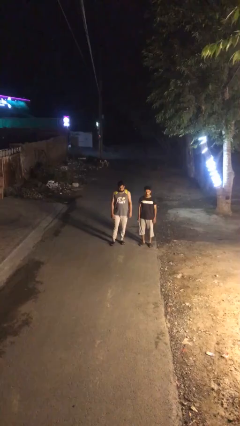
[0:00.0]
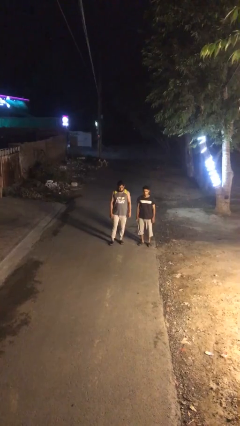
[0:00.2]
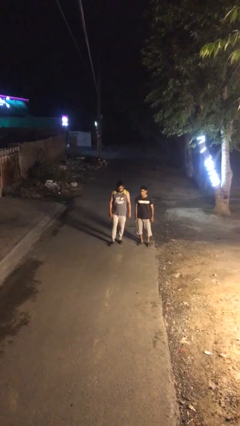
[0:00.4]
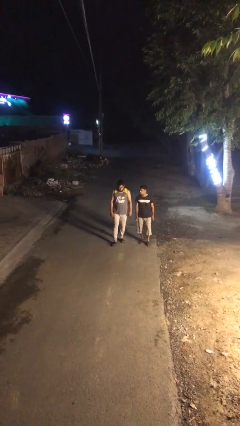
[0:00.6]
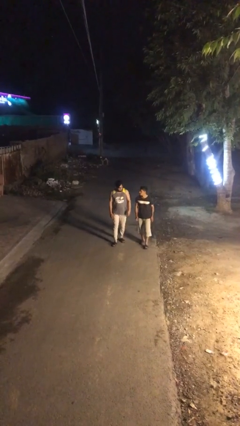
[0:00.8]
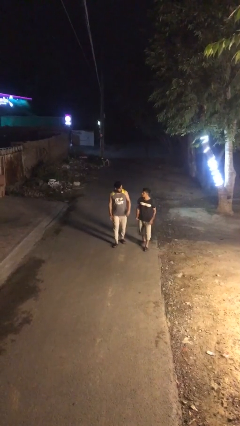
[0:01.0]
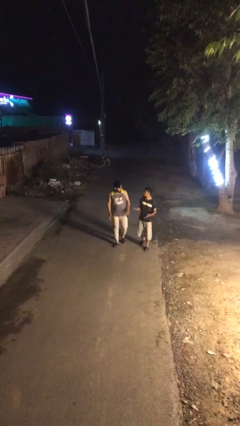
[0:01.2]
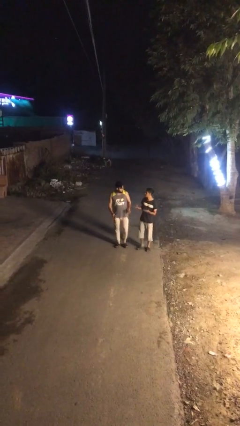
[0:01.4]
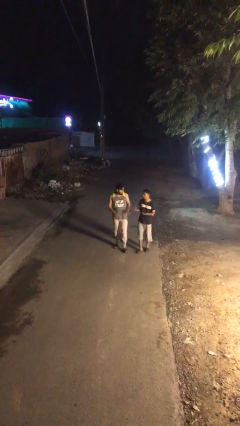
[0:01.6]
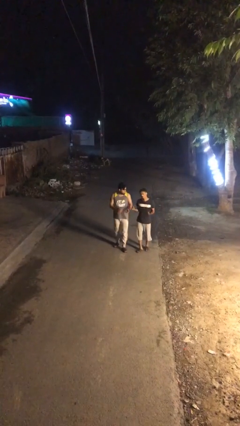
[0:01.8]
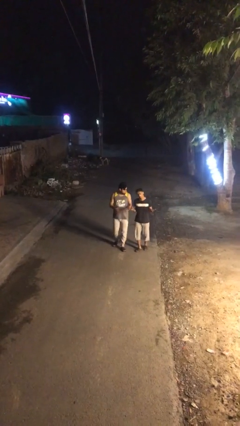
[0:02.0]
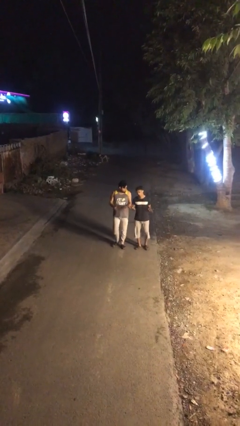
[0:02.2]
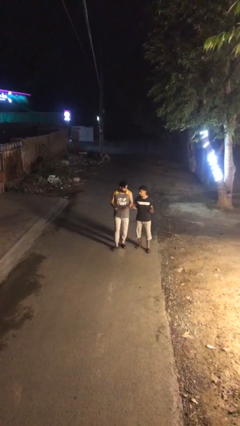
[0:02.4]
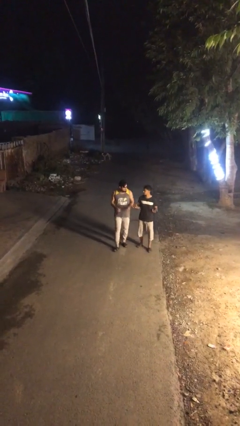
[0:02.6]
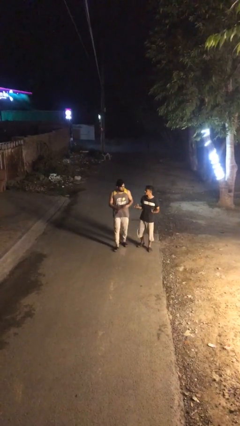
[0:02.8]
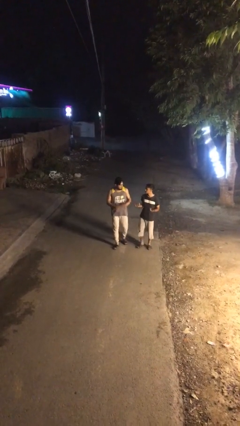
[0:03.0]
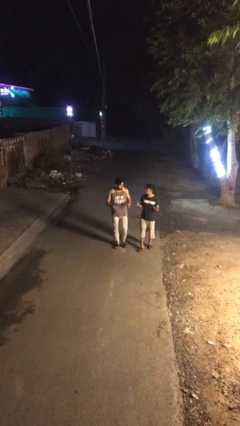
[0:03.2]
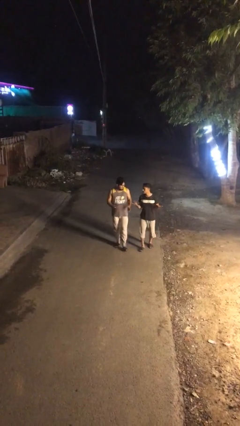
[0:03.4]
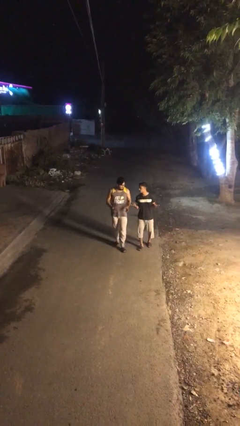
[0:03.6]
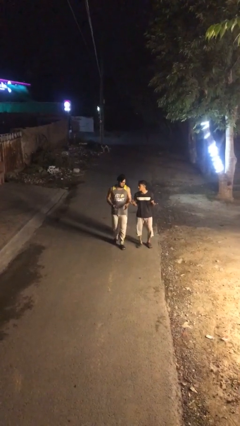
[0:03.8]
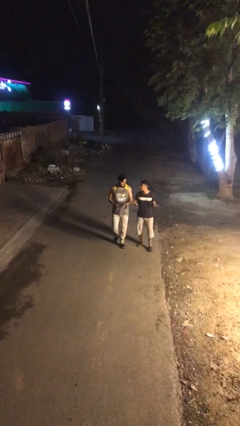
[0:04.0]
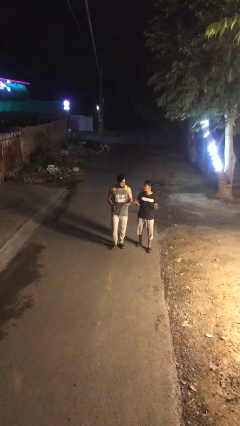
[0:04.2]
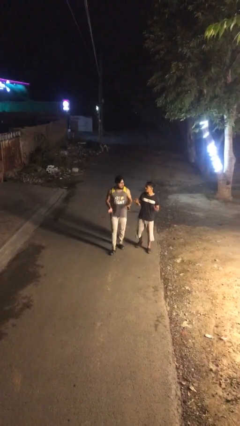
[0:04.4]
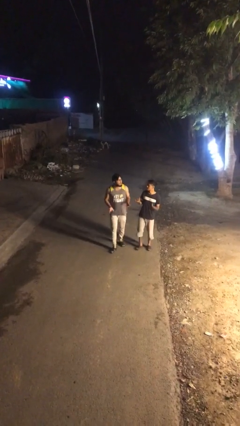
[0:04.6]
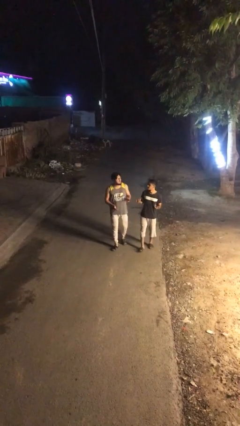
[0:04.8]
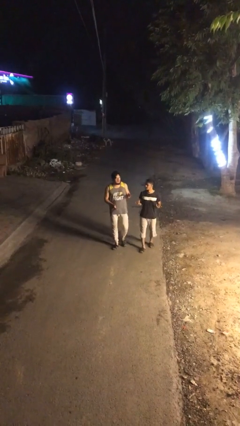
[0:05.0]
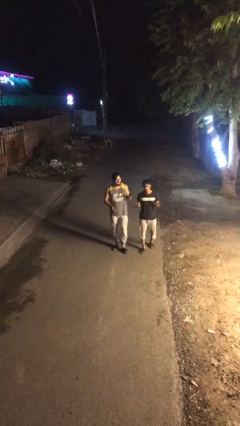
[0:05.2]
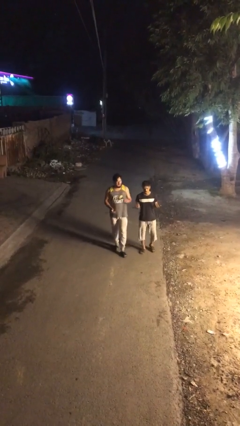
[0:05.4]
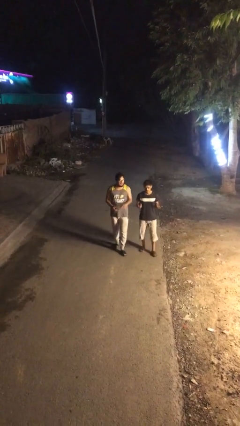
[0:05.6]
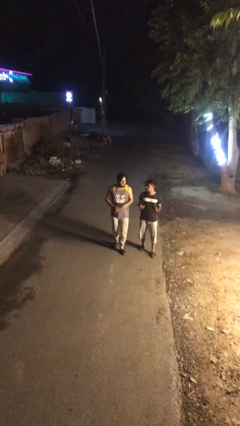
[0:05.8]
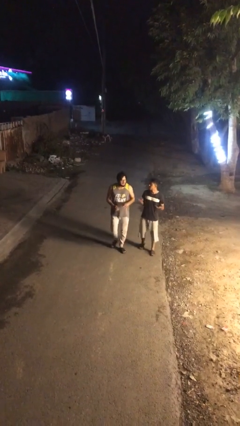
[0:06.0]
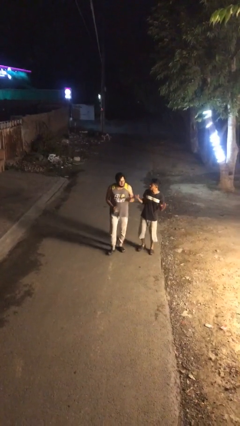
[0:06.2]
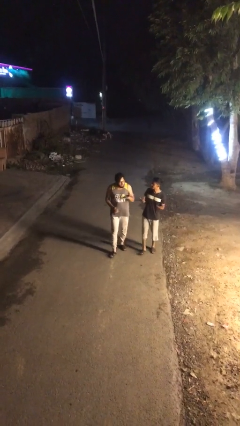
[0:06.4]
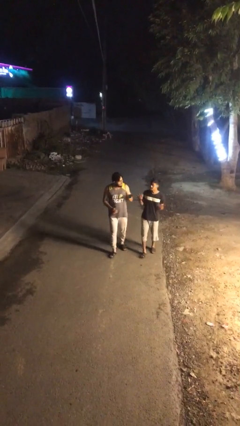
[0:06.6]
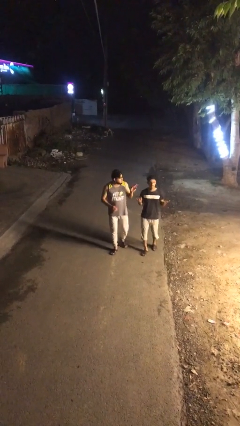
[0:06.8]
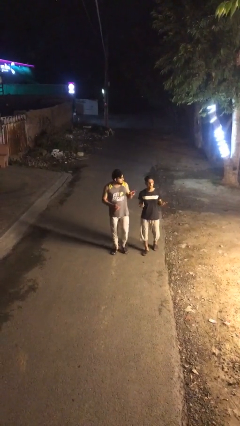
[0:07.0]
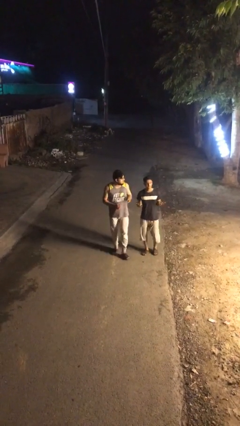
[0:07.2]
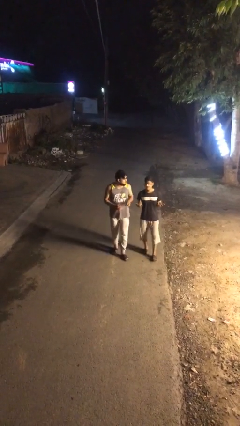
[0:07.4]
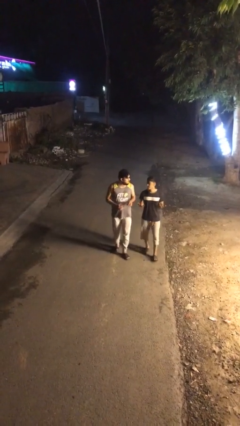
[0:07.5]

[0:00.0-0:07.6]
person talks to person

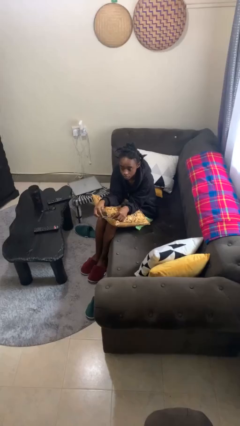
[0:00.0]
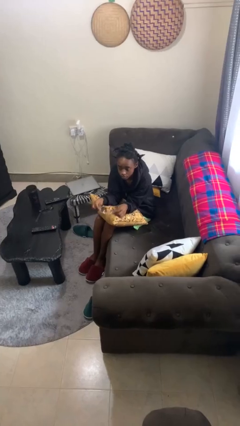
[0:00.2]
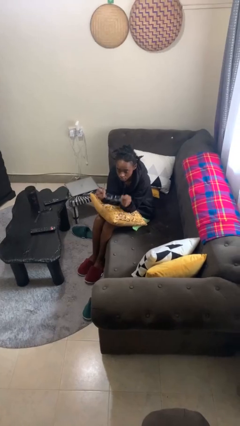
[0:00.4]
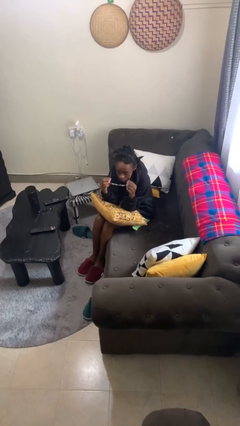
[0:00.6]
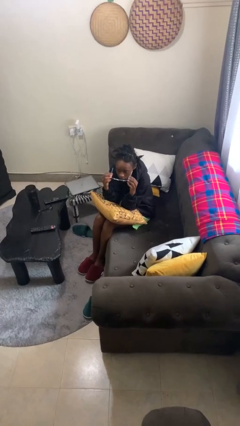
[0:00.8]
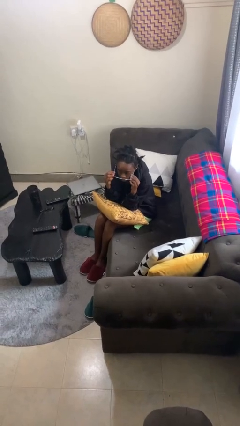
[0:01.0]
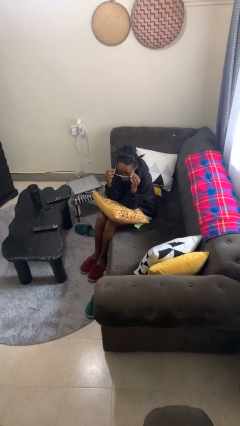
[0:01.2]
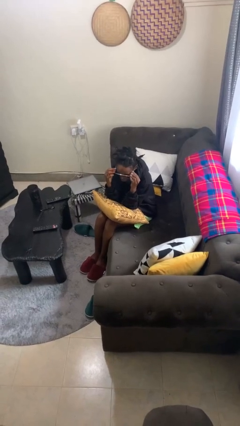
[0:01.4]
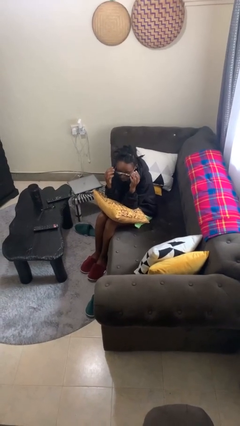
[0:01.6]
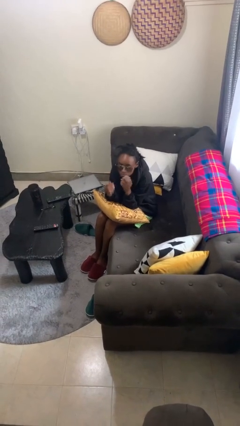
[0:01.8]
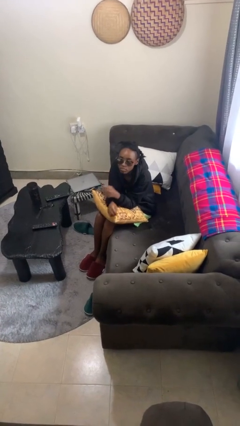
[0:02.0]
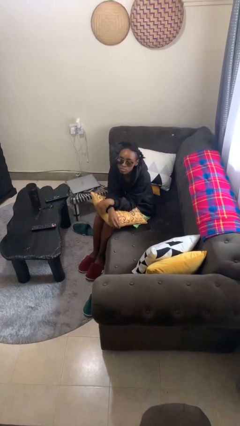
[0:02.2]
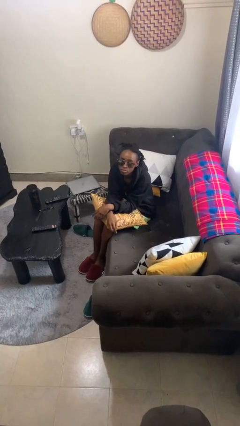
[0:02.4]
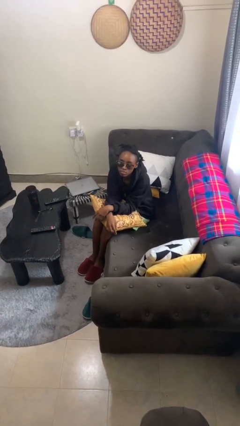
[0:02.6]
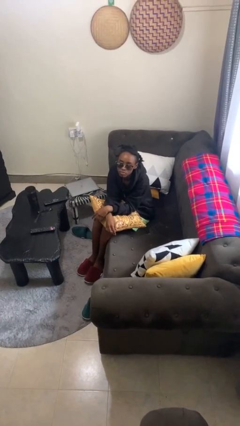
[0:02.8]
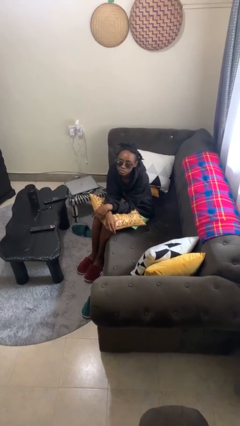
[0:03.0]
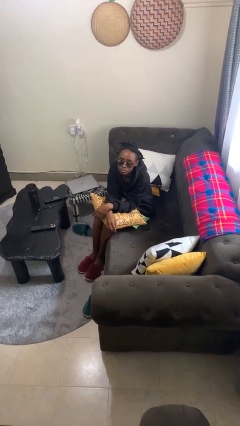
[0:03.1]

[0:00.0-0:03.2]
person puts on sunglasses

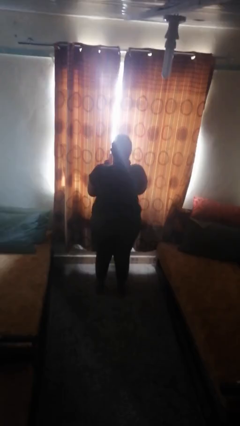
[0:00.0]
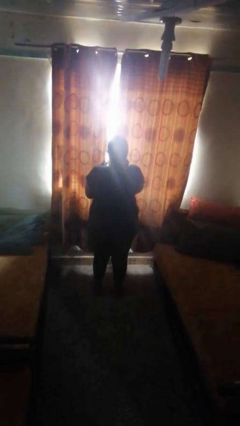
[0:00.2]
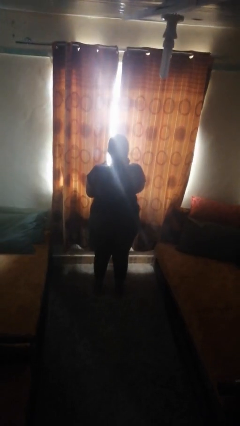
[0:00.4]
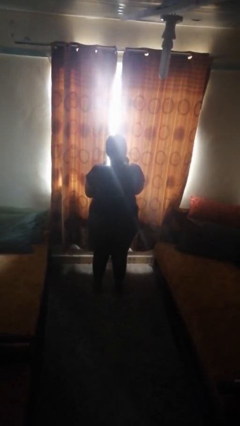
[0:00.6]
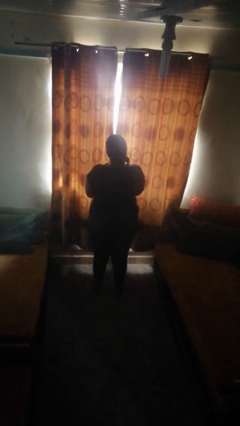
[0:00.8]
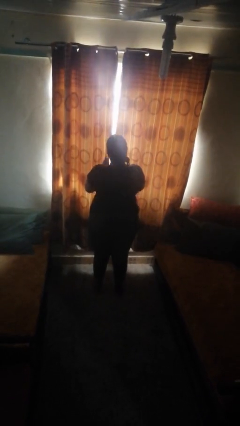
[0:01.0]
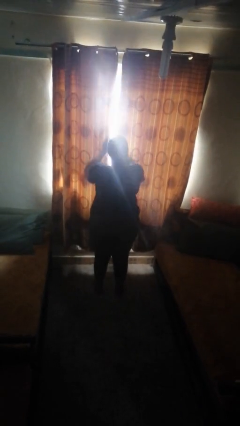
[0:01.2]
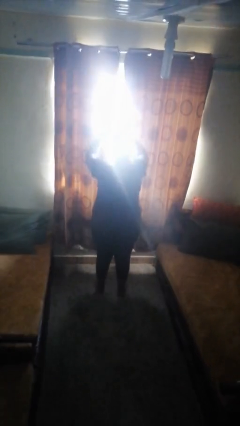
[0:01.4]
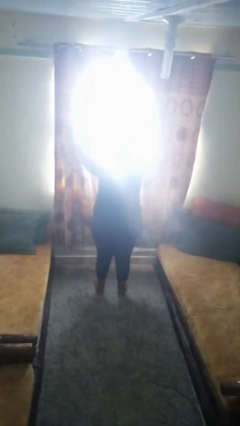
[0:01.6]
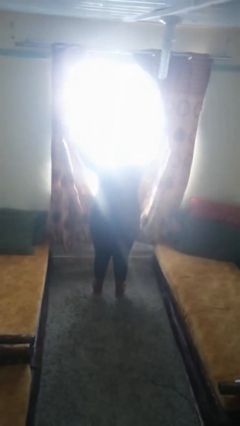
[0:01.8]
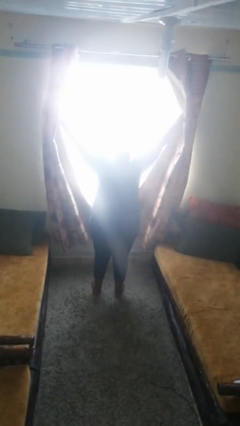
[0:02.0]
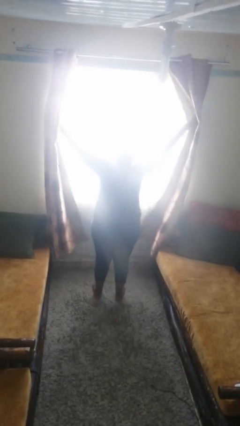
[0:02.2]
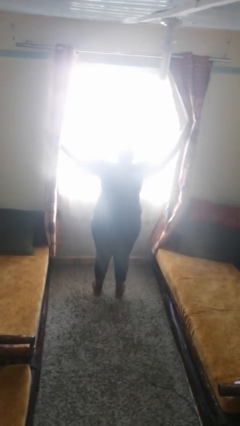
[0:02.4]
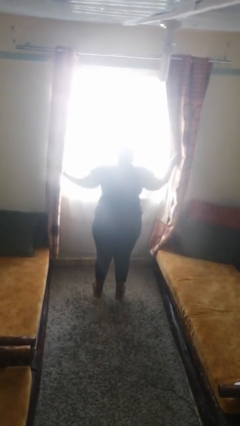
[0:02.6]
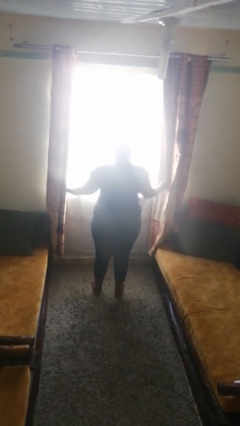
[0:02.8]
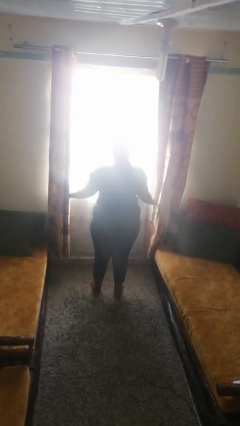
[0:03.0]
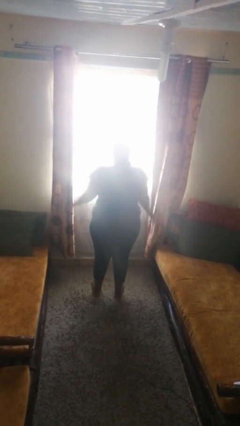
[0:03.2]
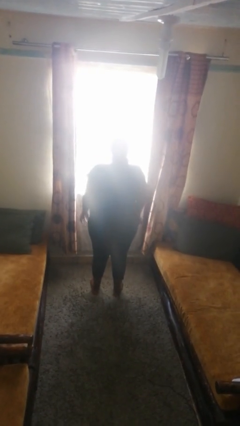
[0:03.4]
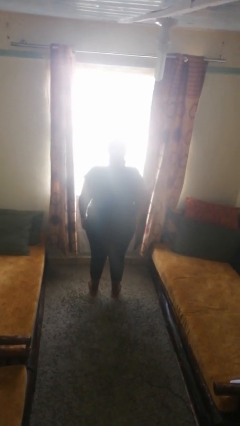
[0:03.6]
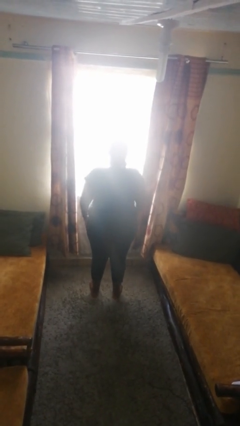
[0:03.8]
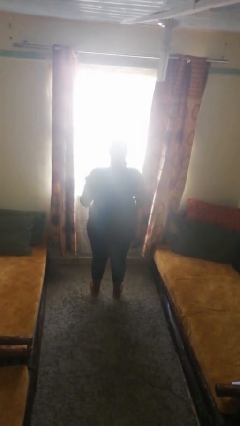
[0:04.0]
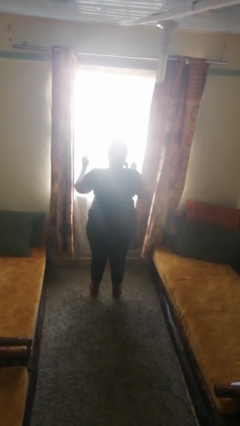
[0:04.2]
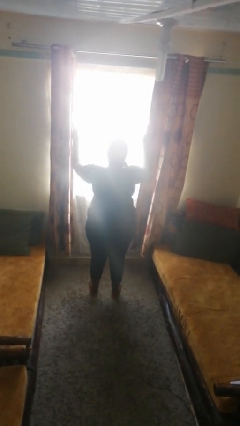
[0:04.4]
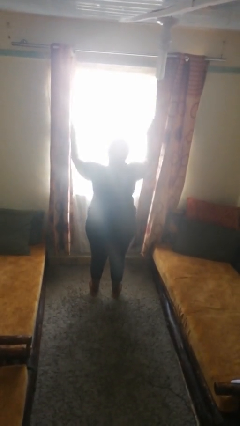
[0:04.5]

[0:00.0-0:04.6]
person opens curtains

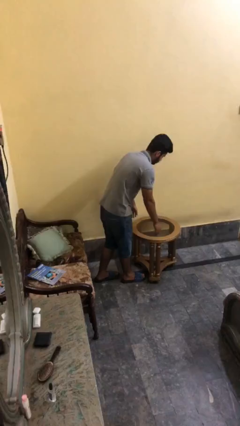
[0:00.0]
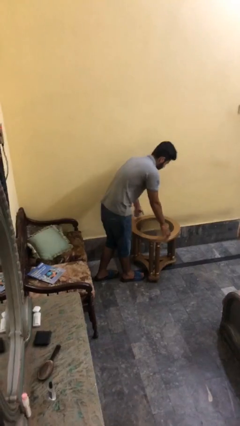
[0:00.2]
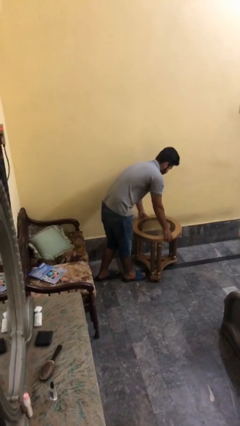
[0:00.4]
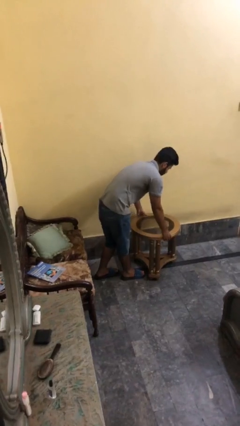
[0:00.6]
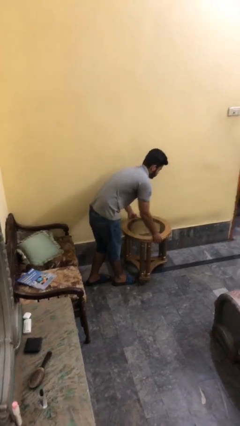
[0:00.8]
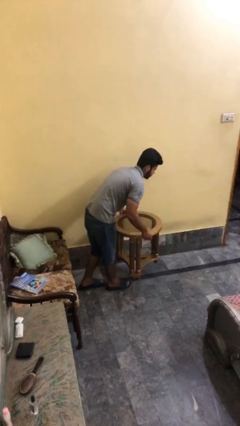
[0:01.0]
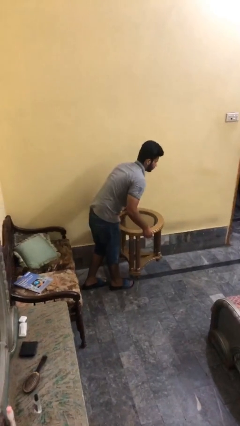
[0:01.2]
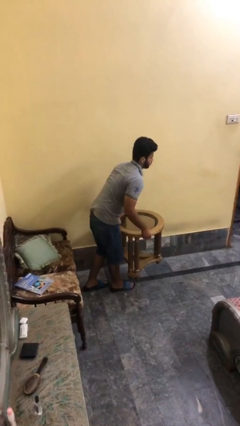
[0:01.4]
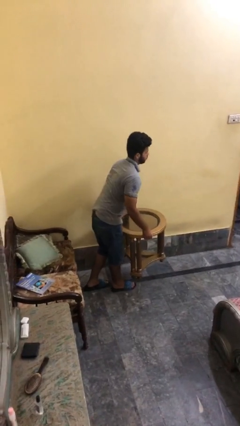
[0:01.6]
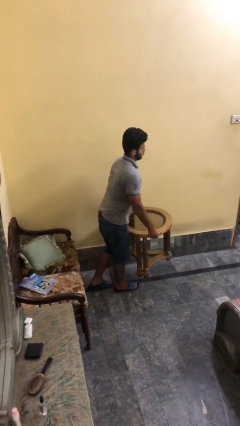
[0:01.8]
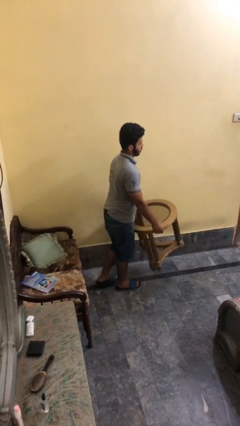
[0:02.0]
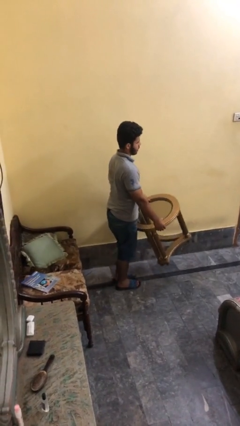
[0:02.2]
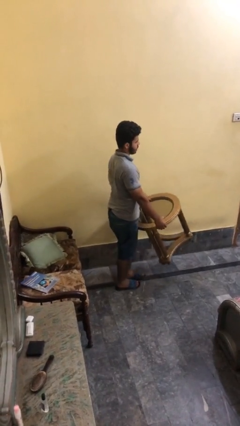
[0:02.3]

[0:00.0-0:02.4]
person picks up object from floor
